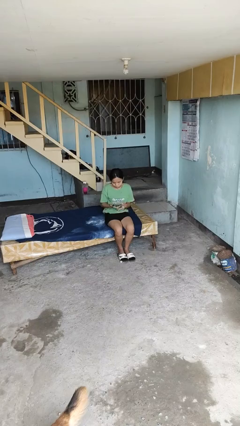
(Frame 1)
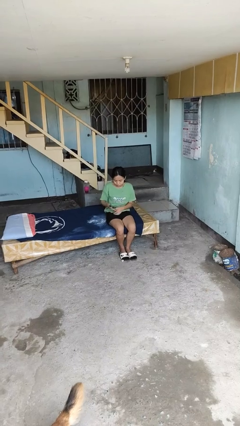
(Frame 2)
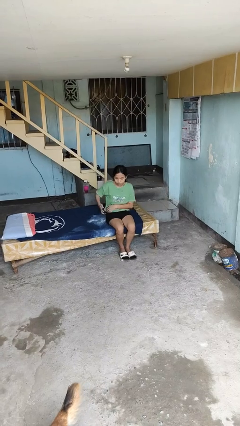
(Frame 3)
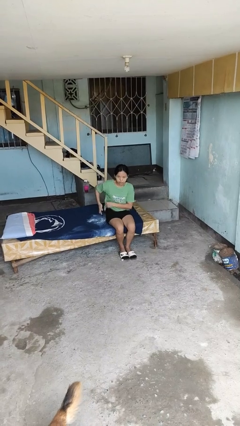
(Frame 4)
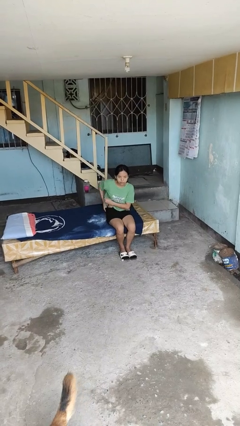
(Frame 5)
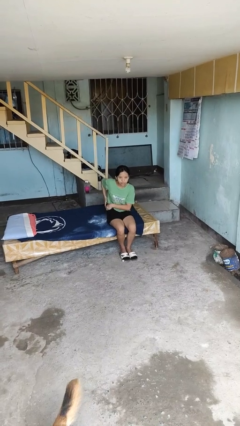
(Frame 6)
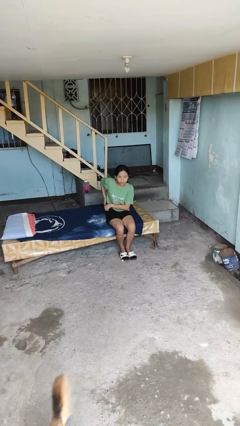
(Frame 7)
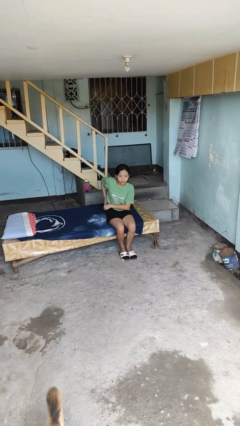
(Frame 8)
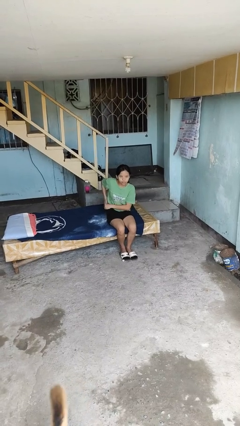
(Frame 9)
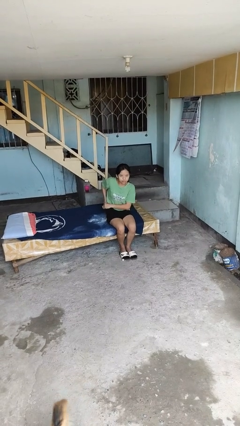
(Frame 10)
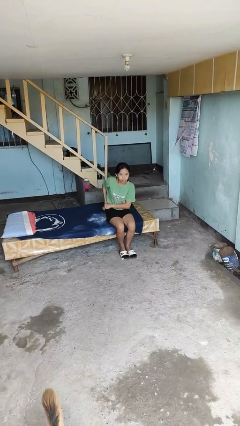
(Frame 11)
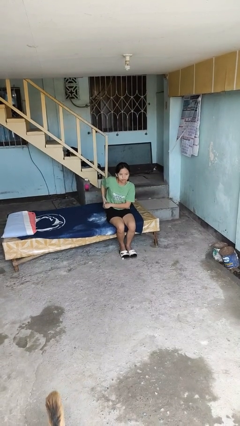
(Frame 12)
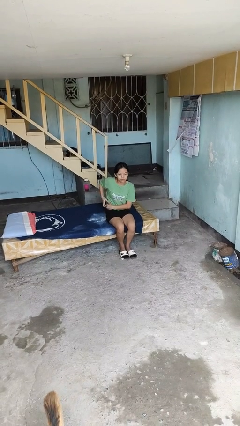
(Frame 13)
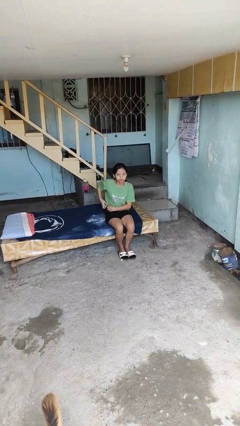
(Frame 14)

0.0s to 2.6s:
person puts phone into pocket

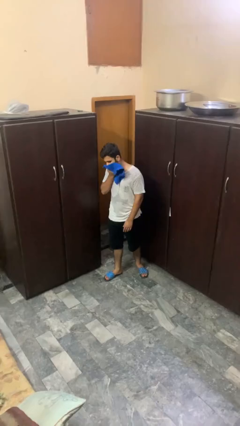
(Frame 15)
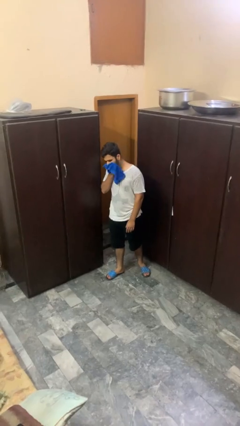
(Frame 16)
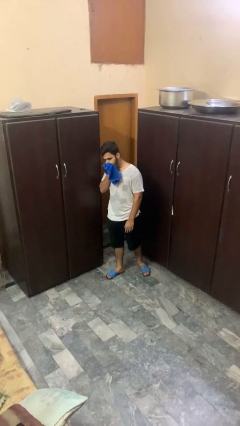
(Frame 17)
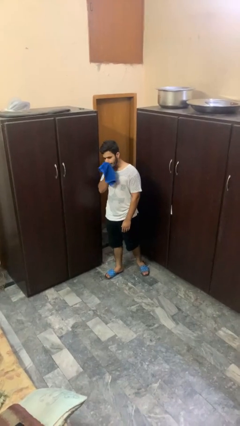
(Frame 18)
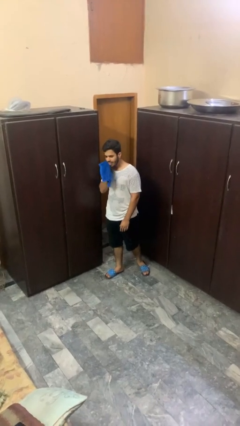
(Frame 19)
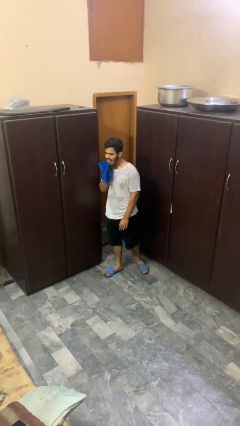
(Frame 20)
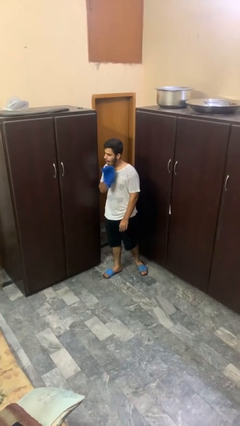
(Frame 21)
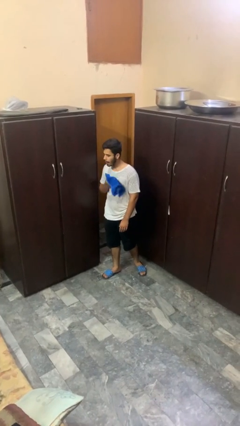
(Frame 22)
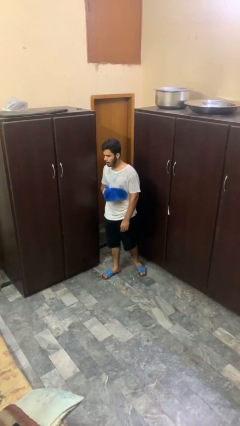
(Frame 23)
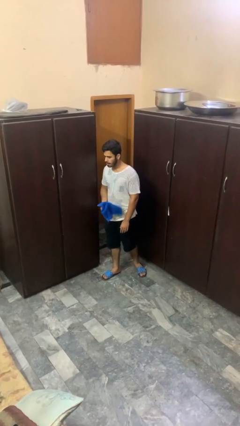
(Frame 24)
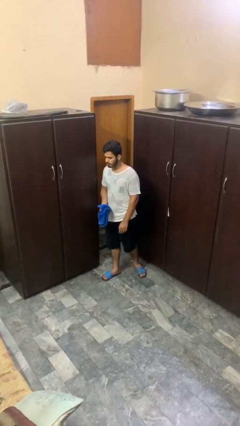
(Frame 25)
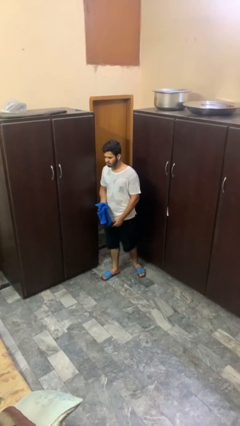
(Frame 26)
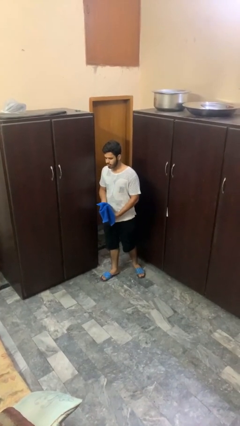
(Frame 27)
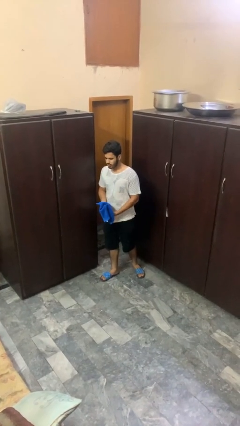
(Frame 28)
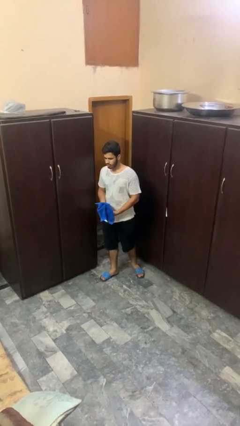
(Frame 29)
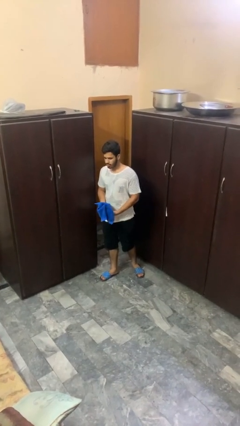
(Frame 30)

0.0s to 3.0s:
person wipes mouth with napkin

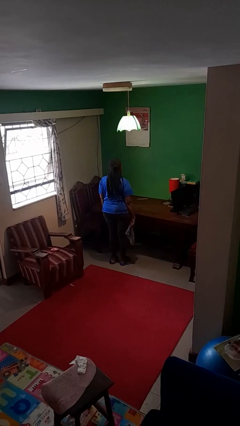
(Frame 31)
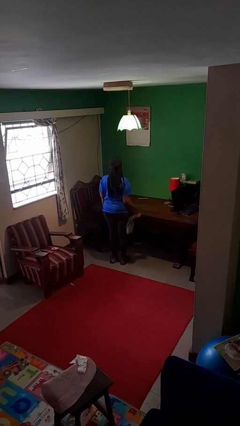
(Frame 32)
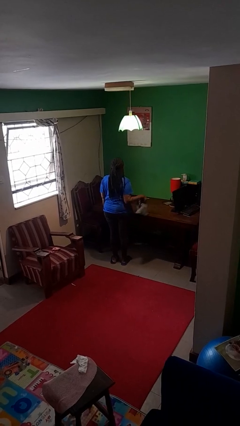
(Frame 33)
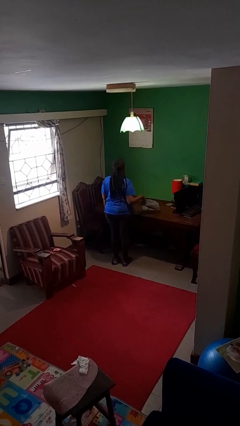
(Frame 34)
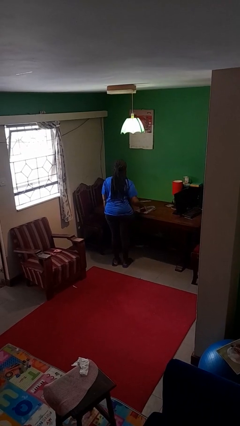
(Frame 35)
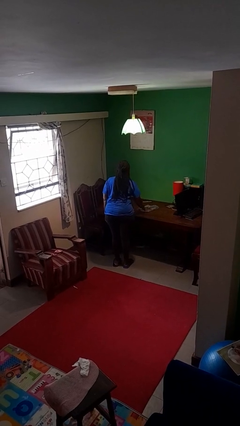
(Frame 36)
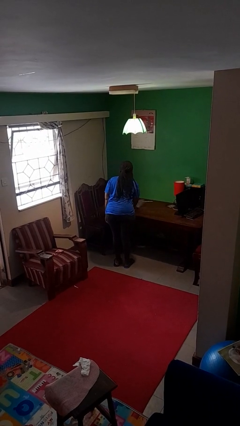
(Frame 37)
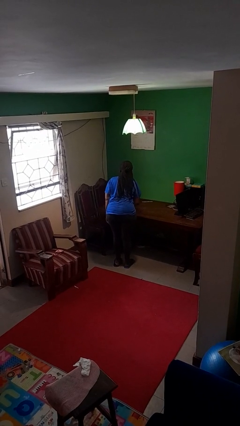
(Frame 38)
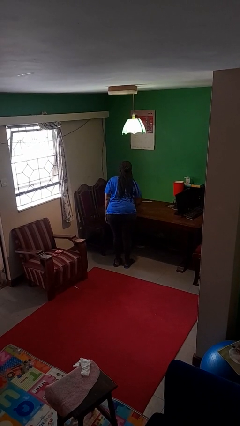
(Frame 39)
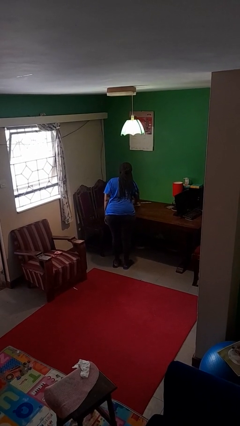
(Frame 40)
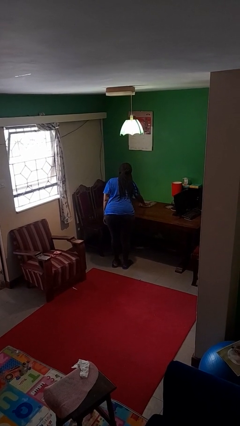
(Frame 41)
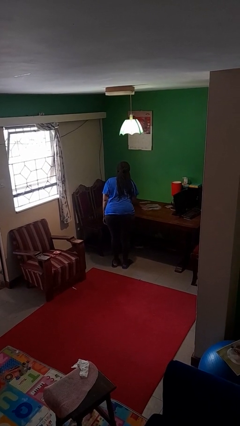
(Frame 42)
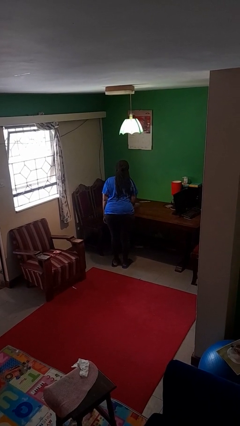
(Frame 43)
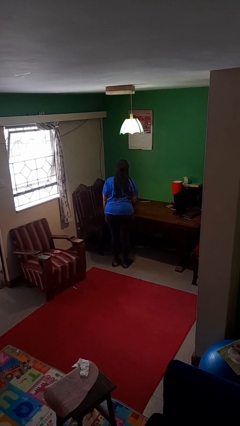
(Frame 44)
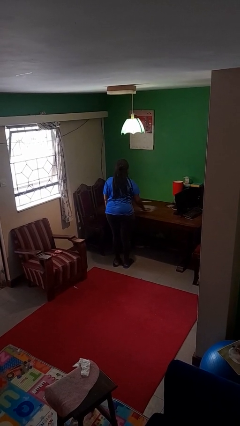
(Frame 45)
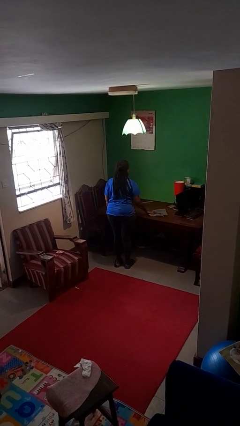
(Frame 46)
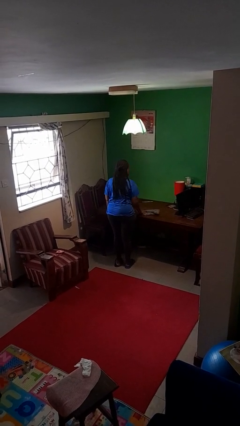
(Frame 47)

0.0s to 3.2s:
person cleans table with rag

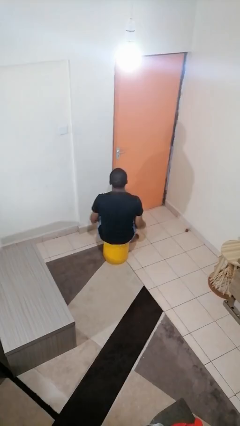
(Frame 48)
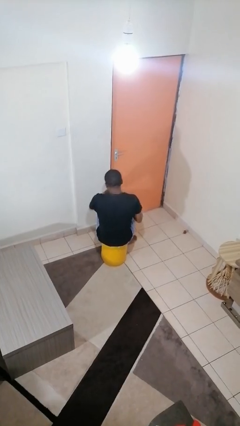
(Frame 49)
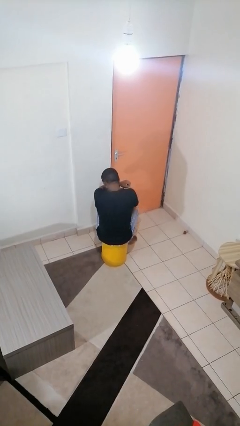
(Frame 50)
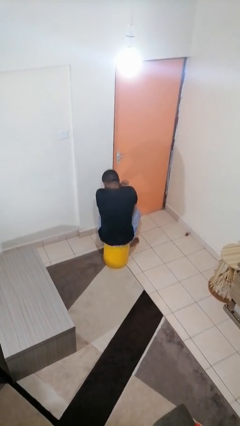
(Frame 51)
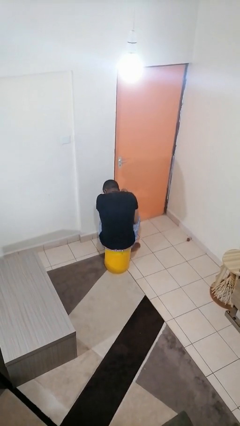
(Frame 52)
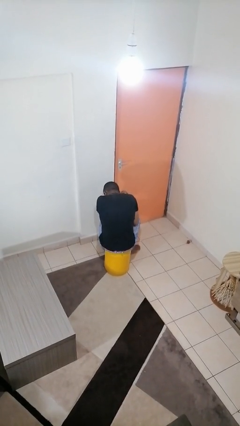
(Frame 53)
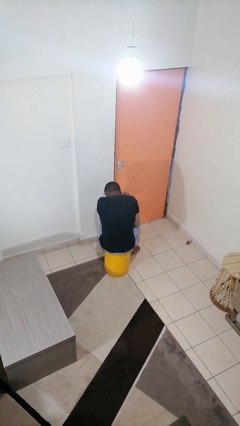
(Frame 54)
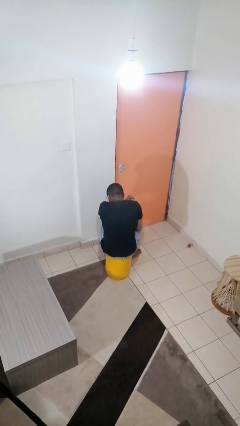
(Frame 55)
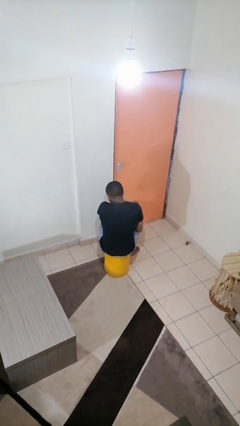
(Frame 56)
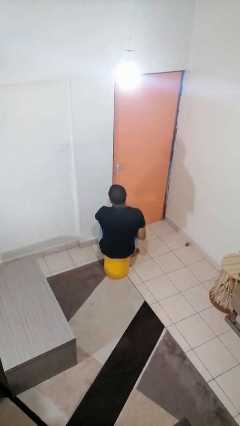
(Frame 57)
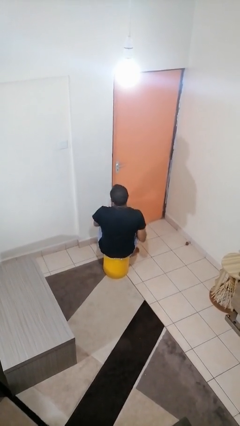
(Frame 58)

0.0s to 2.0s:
person sneezes into arm

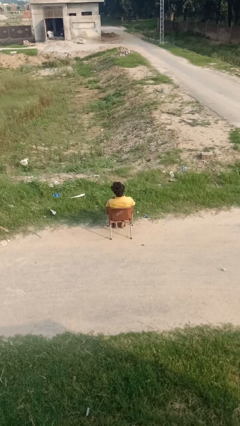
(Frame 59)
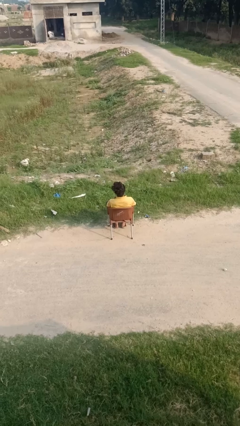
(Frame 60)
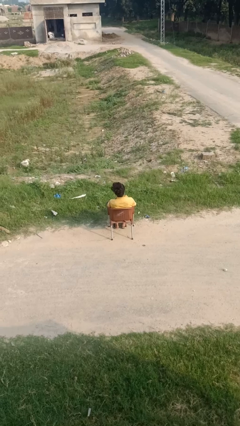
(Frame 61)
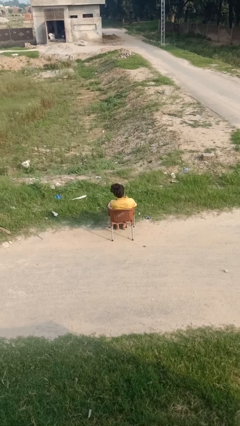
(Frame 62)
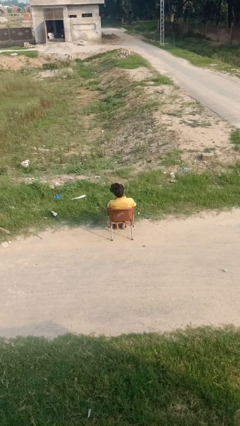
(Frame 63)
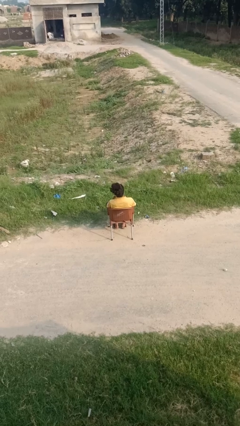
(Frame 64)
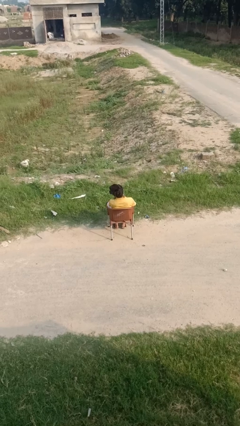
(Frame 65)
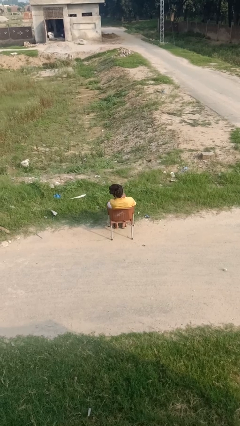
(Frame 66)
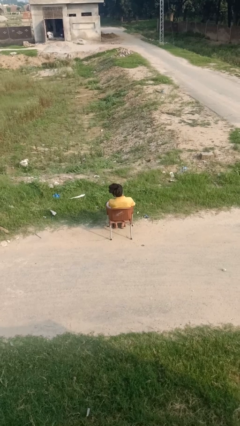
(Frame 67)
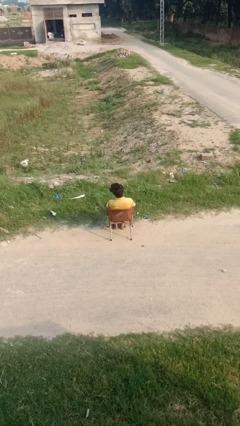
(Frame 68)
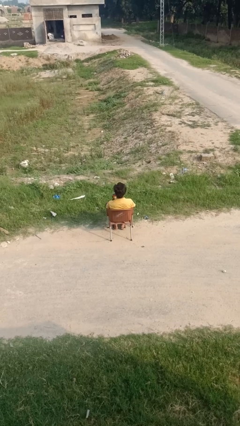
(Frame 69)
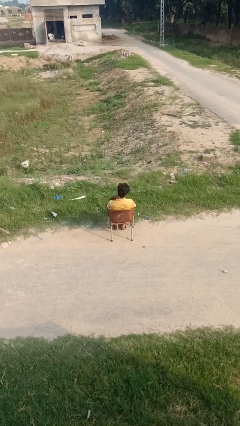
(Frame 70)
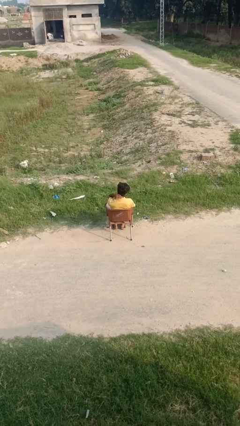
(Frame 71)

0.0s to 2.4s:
person rubs neck

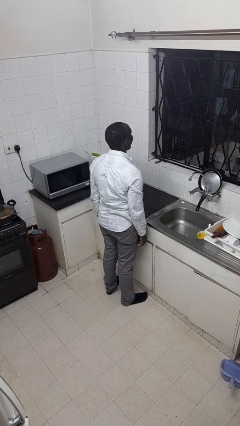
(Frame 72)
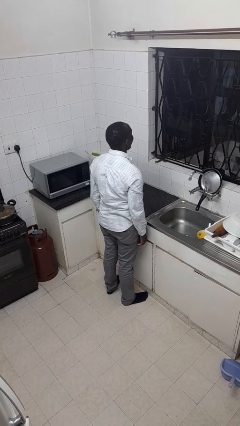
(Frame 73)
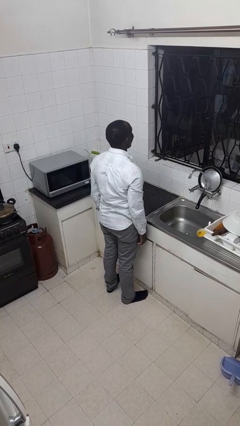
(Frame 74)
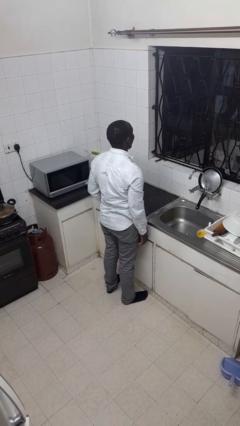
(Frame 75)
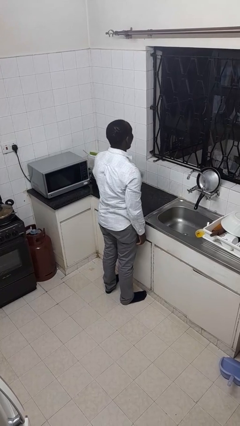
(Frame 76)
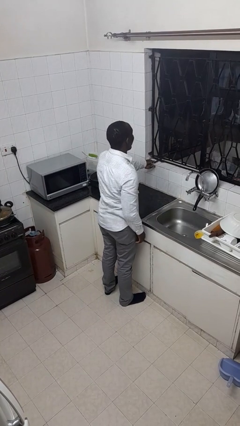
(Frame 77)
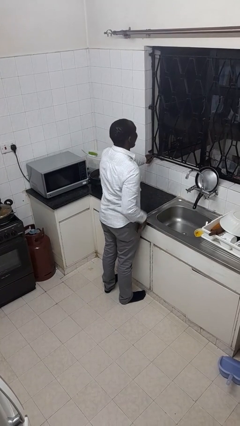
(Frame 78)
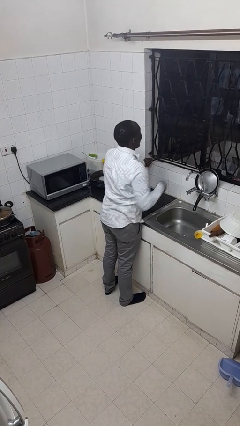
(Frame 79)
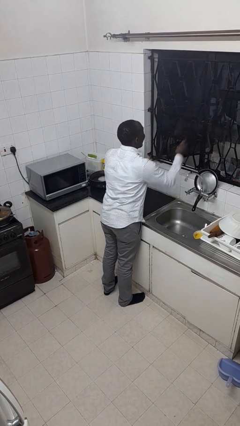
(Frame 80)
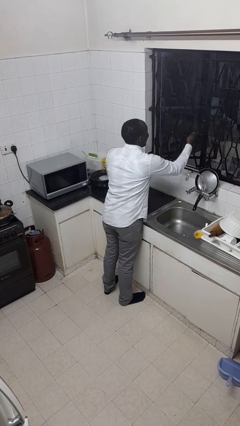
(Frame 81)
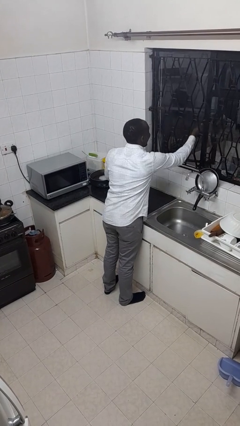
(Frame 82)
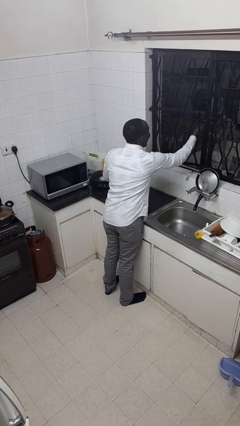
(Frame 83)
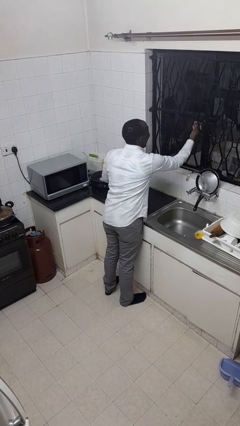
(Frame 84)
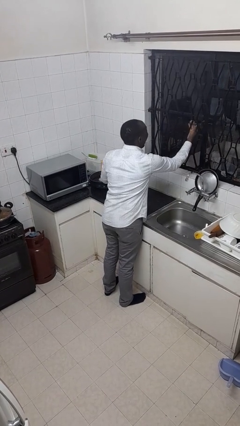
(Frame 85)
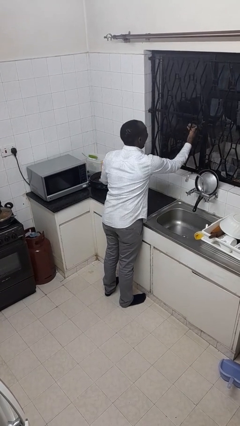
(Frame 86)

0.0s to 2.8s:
person closes home window

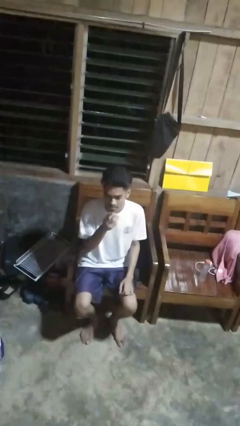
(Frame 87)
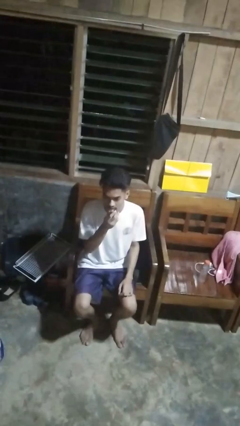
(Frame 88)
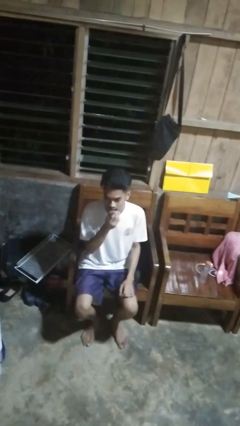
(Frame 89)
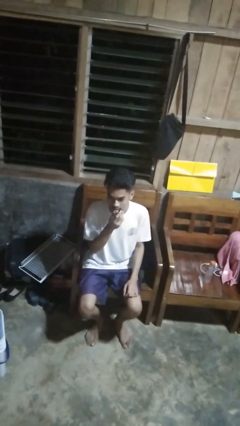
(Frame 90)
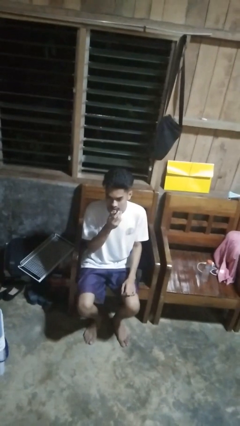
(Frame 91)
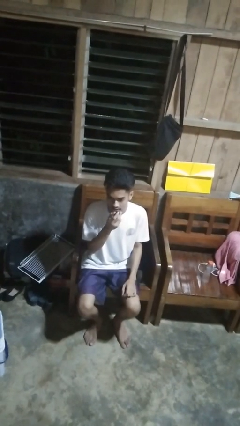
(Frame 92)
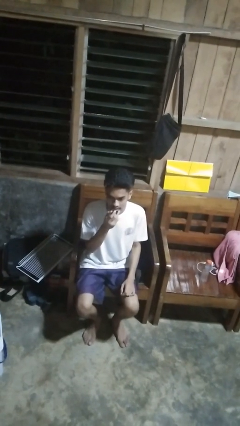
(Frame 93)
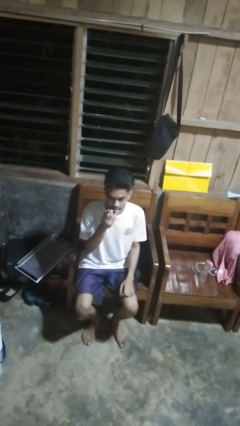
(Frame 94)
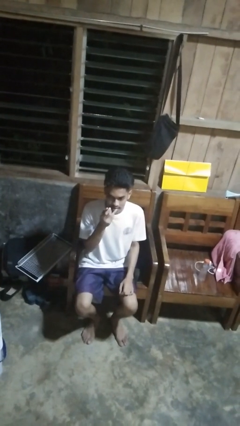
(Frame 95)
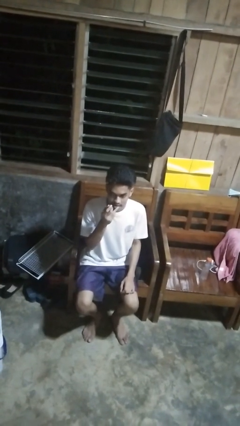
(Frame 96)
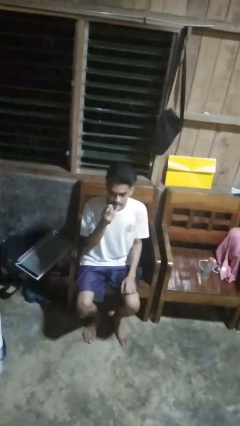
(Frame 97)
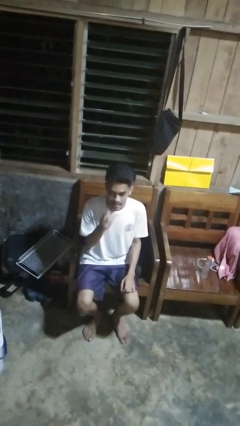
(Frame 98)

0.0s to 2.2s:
person applies lip makeup
